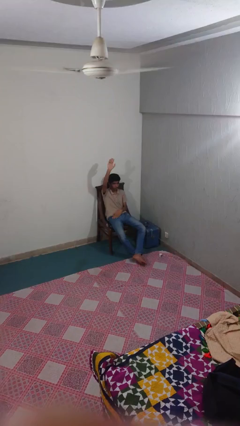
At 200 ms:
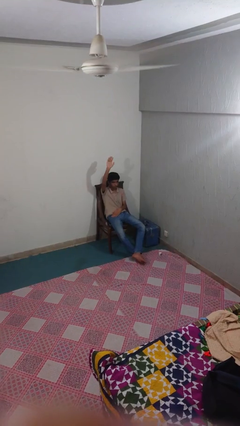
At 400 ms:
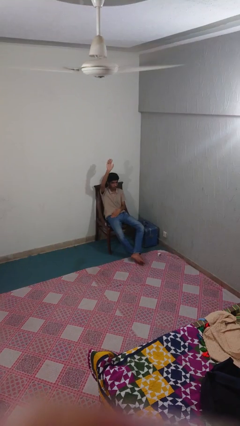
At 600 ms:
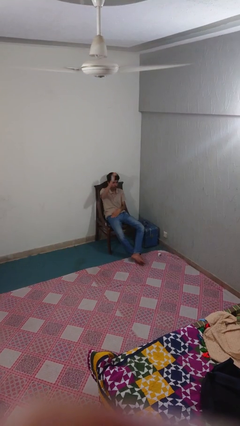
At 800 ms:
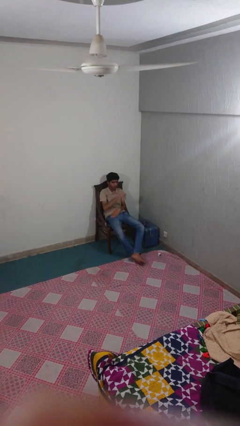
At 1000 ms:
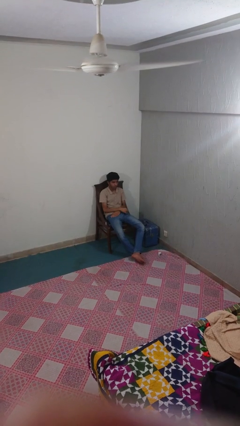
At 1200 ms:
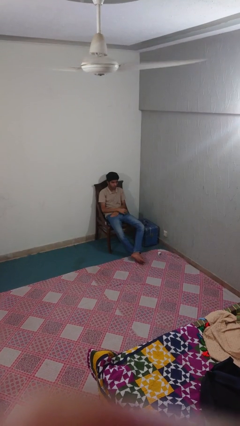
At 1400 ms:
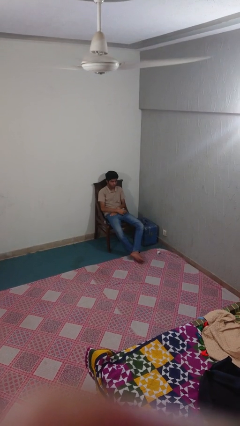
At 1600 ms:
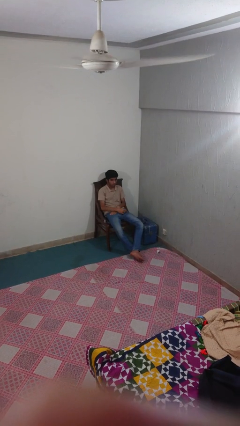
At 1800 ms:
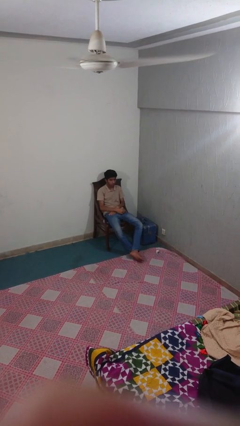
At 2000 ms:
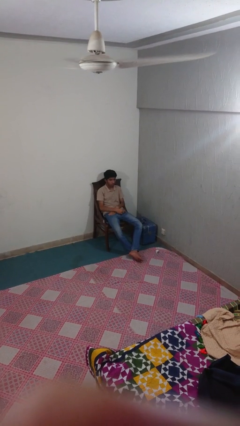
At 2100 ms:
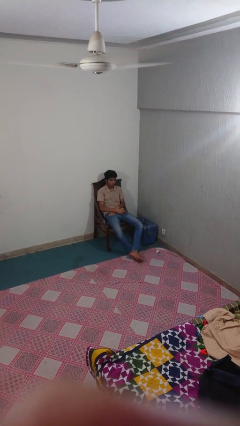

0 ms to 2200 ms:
person gestures lower hand

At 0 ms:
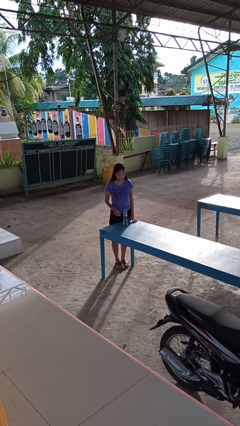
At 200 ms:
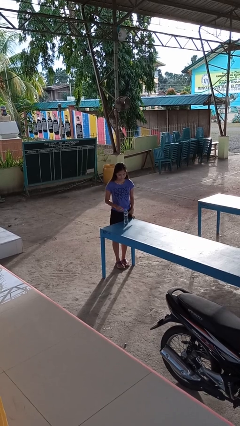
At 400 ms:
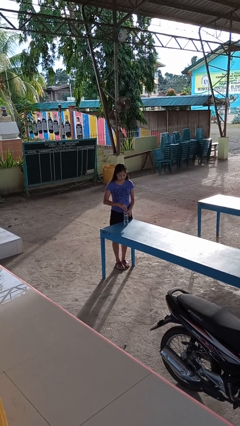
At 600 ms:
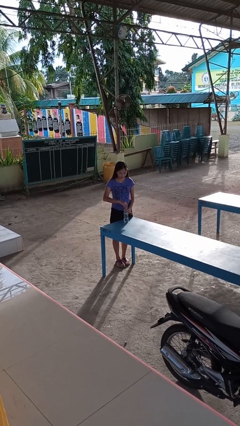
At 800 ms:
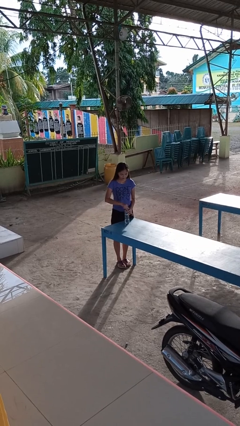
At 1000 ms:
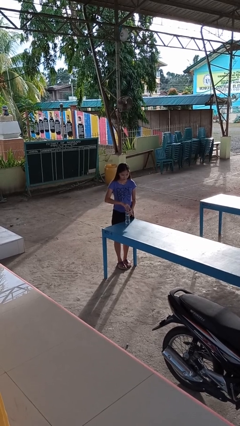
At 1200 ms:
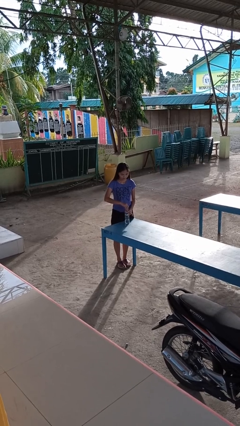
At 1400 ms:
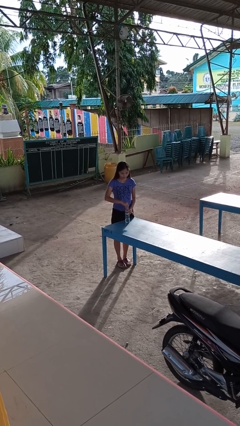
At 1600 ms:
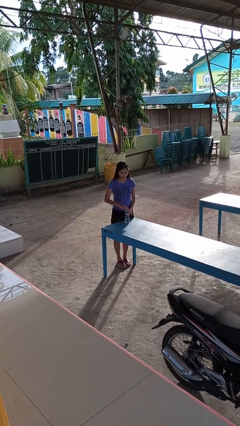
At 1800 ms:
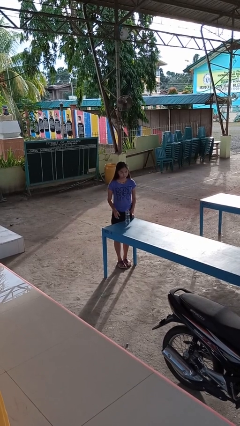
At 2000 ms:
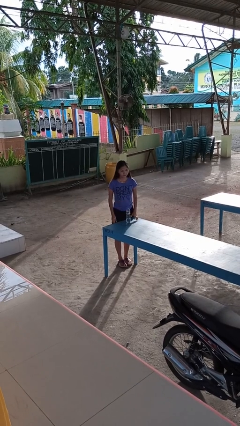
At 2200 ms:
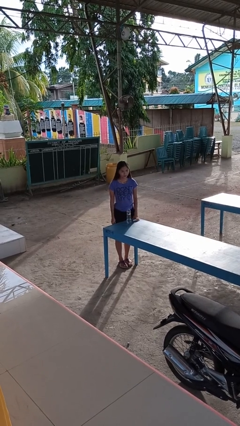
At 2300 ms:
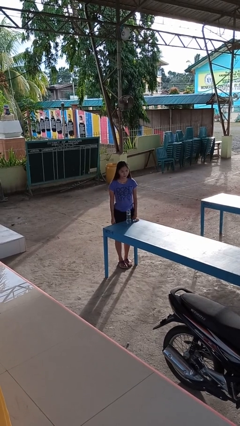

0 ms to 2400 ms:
person screws lid to bottle

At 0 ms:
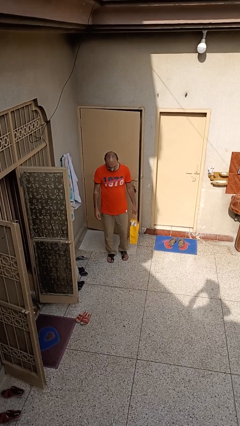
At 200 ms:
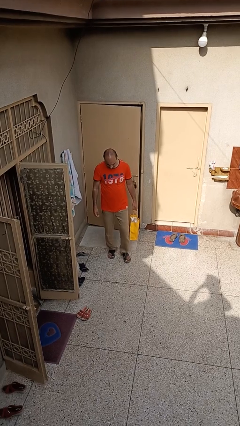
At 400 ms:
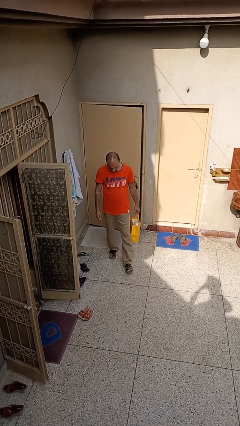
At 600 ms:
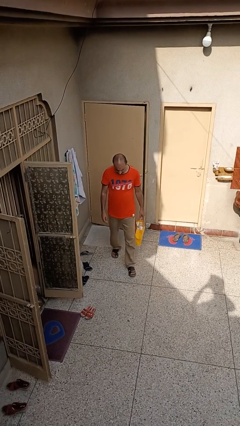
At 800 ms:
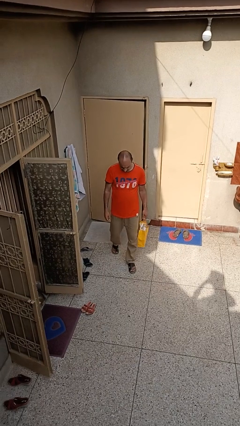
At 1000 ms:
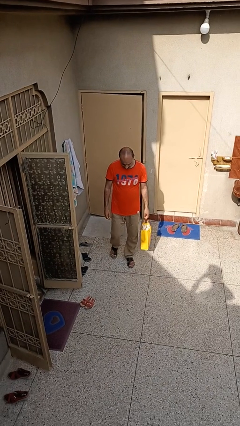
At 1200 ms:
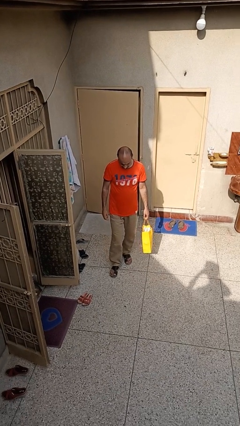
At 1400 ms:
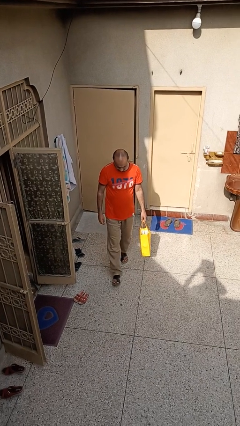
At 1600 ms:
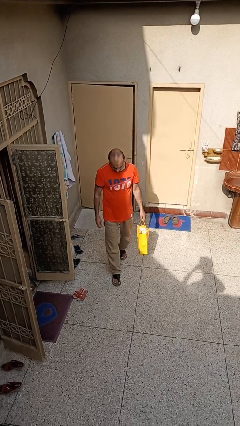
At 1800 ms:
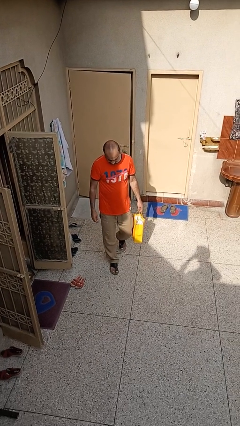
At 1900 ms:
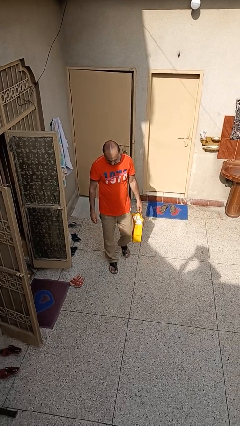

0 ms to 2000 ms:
person carries groceries

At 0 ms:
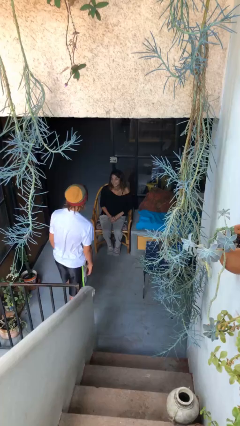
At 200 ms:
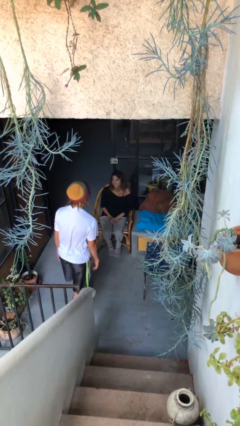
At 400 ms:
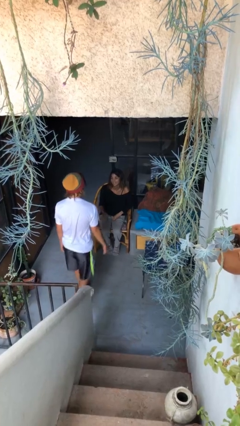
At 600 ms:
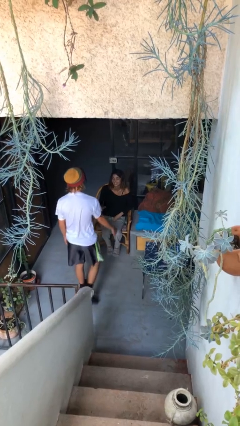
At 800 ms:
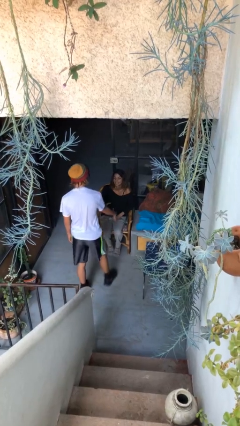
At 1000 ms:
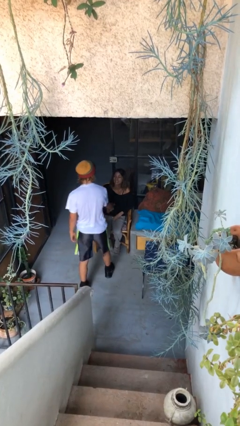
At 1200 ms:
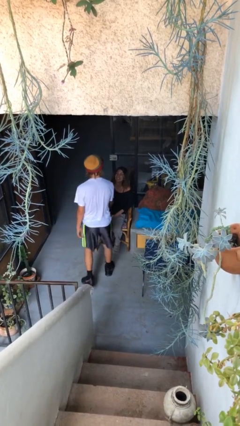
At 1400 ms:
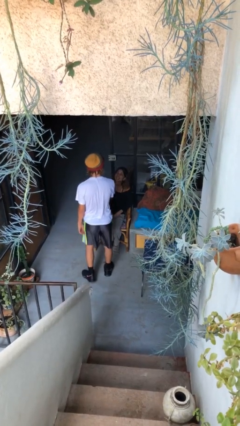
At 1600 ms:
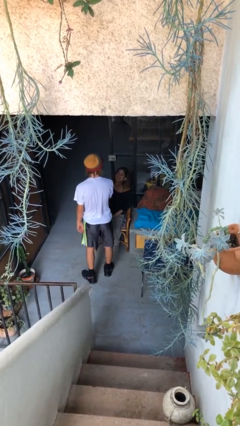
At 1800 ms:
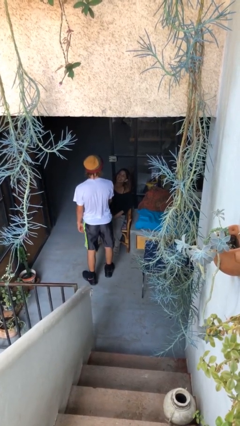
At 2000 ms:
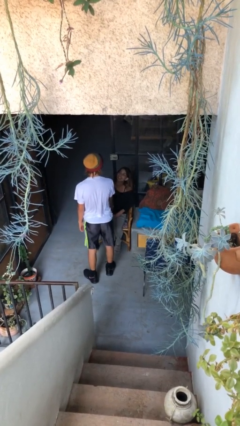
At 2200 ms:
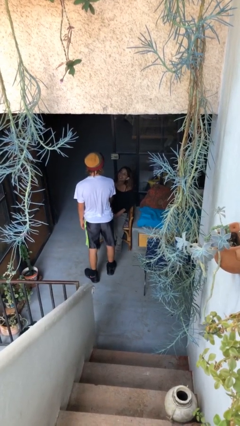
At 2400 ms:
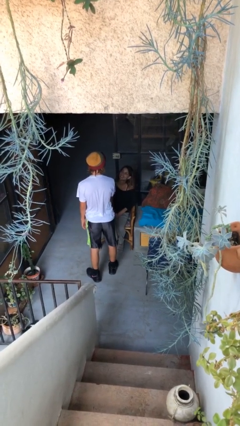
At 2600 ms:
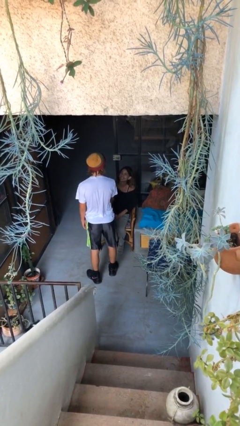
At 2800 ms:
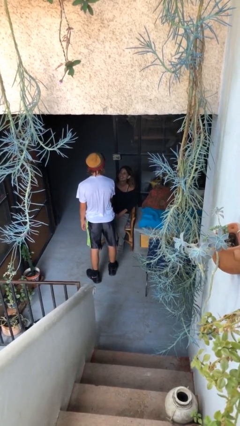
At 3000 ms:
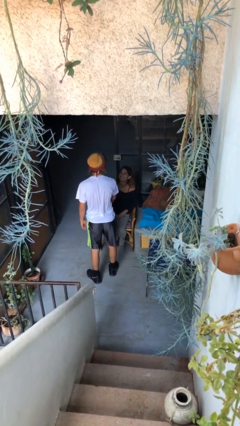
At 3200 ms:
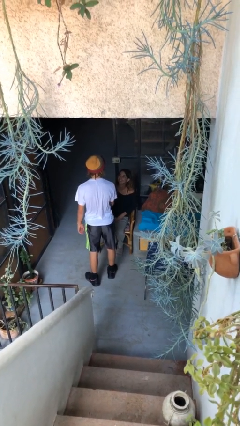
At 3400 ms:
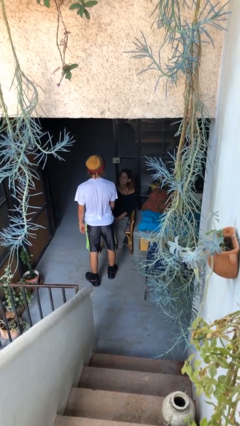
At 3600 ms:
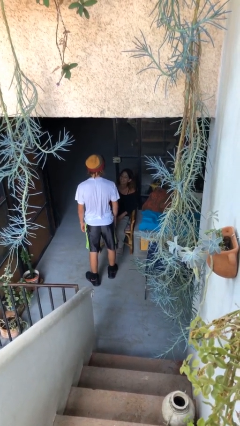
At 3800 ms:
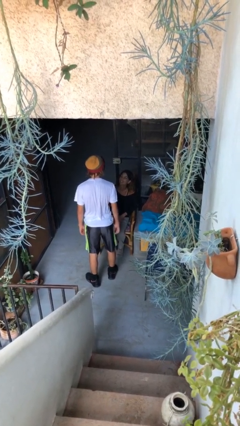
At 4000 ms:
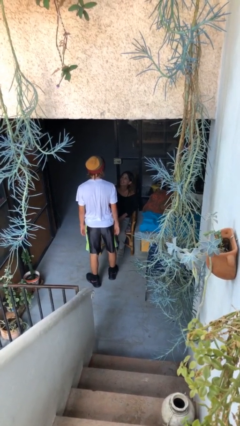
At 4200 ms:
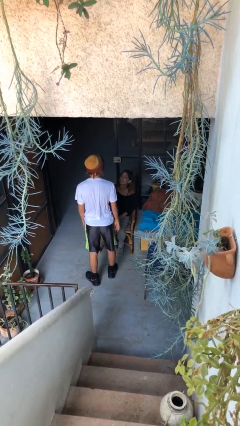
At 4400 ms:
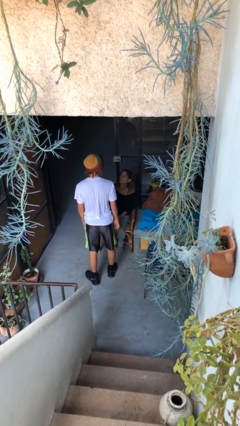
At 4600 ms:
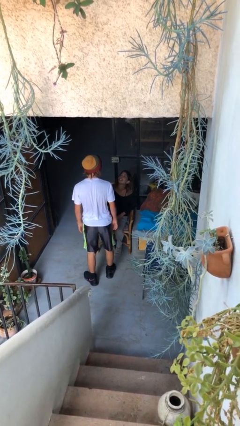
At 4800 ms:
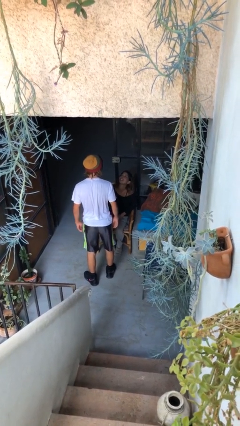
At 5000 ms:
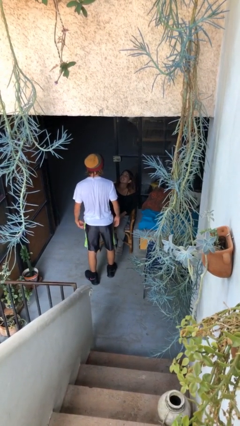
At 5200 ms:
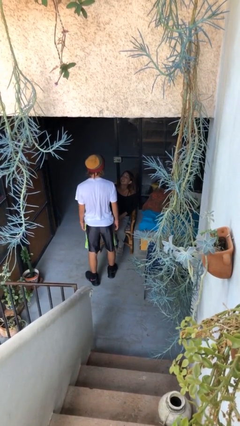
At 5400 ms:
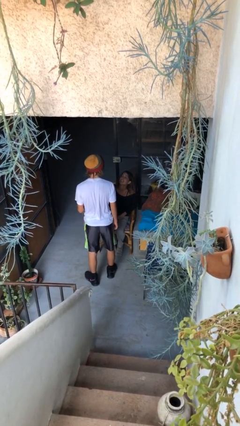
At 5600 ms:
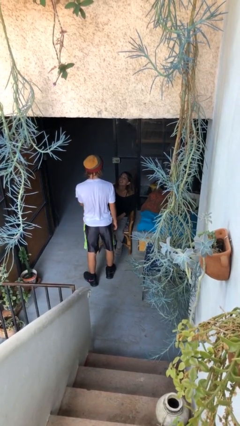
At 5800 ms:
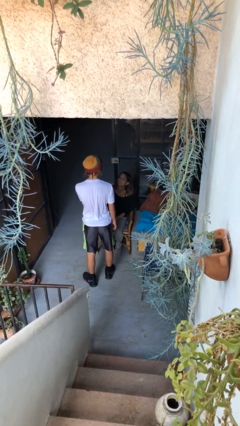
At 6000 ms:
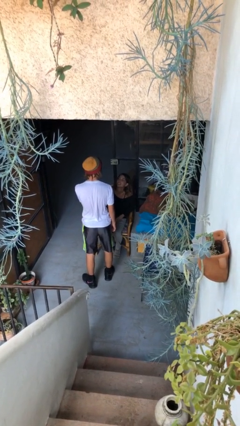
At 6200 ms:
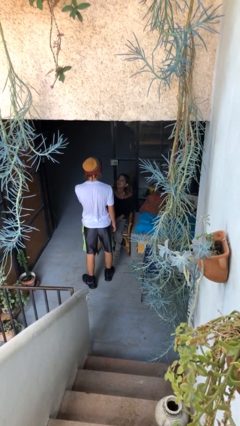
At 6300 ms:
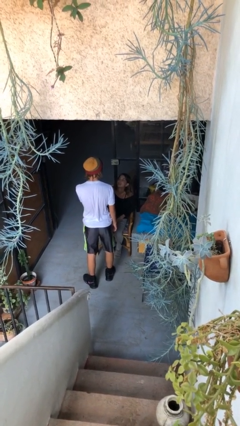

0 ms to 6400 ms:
person shakes hand

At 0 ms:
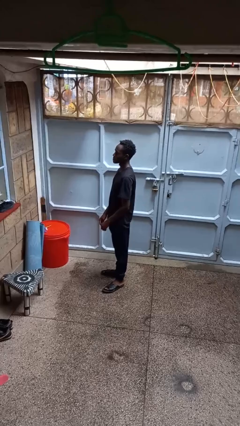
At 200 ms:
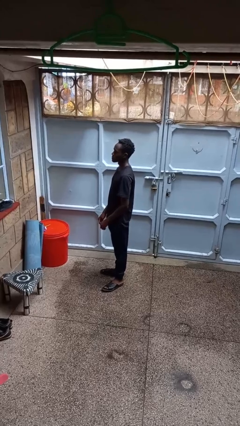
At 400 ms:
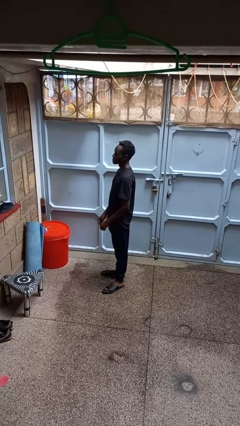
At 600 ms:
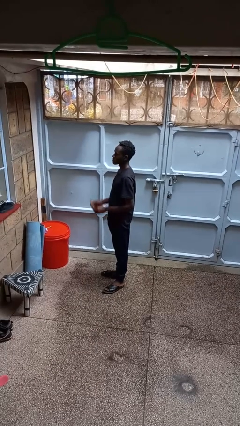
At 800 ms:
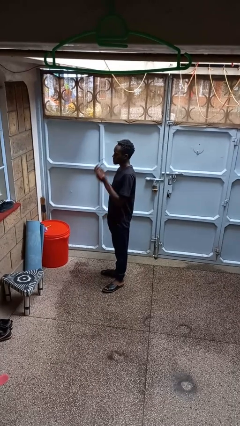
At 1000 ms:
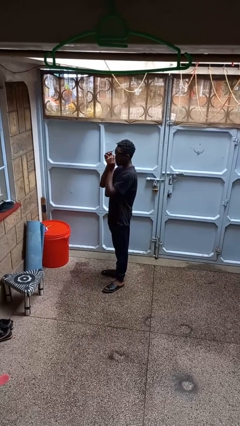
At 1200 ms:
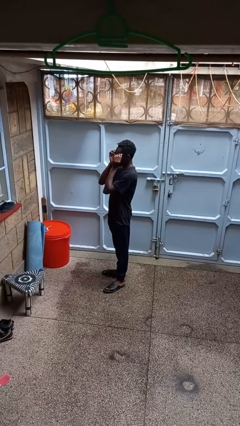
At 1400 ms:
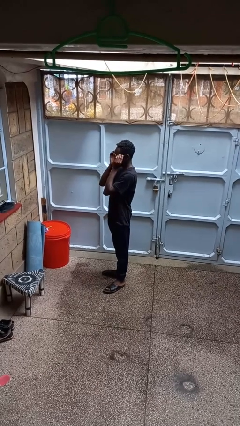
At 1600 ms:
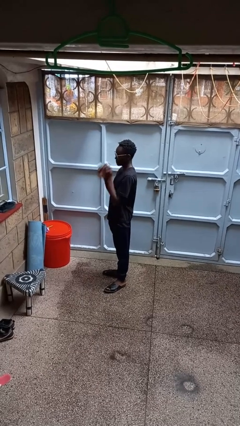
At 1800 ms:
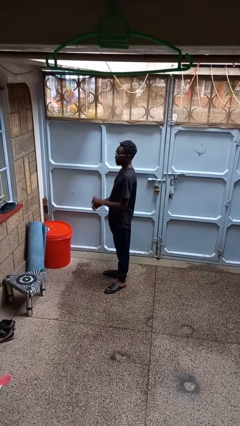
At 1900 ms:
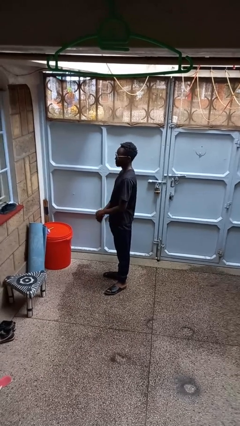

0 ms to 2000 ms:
person puts on glasses

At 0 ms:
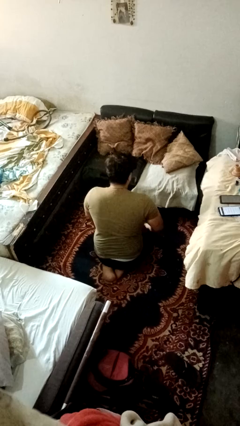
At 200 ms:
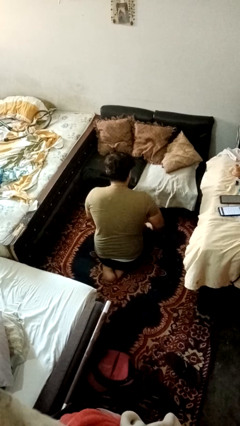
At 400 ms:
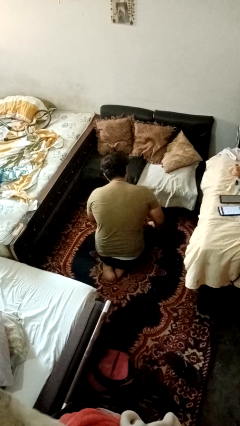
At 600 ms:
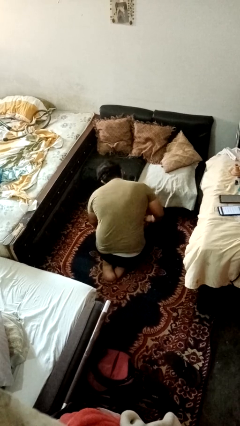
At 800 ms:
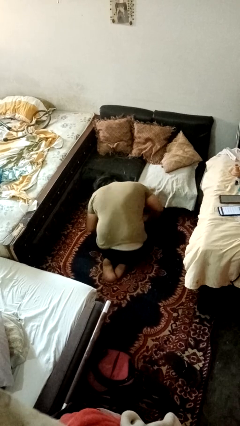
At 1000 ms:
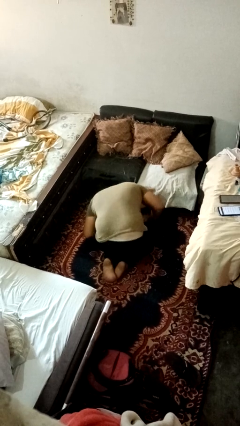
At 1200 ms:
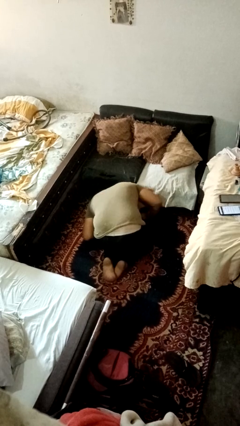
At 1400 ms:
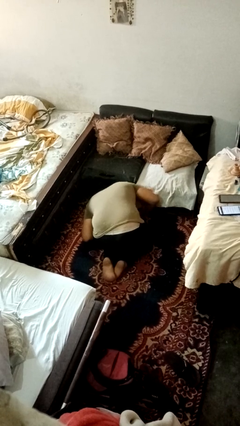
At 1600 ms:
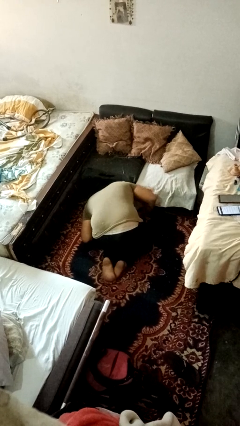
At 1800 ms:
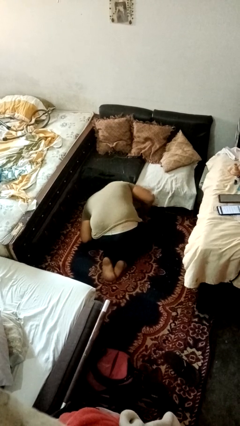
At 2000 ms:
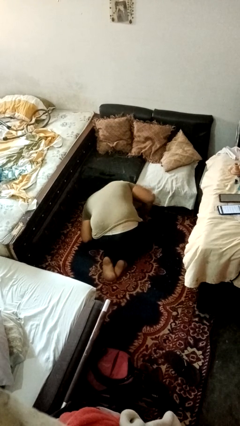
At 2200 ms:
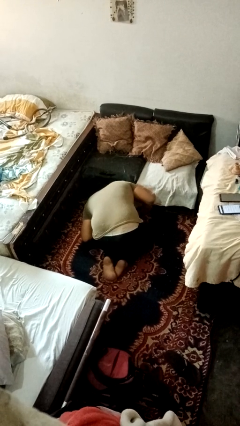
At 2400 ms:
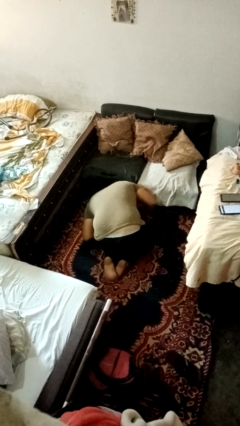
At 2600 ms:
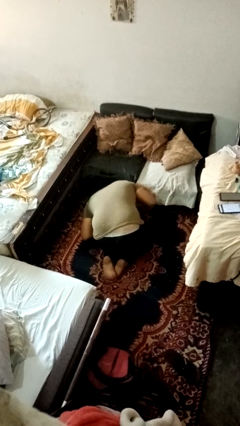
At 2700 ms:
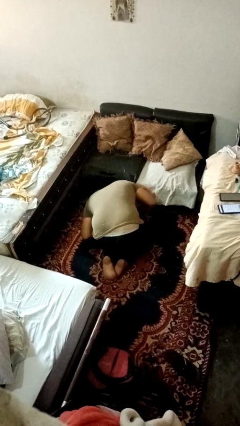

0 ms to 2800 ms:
person searches under couch
